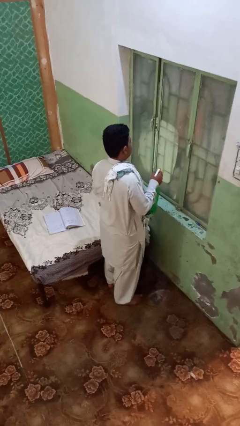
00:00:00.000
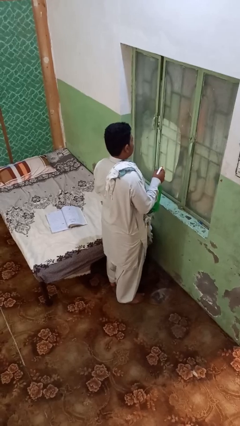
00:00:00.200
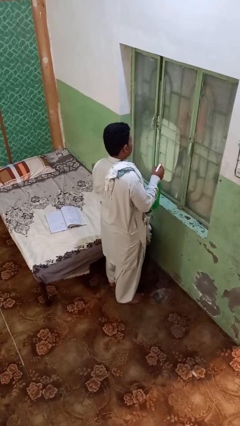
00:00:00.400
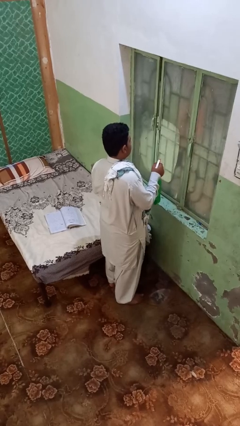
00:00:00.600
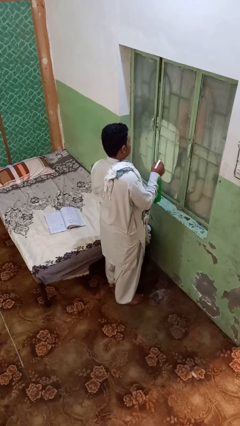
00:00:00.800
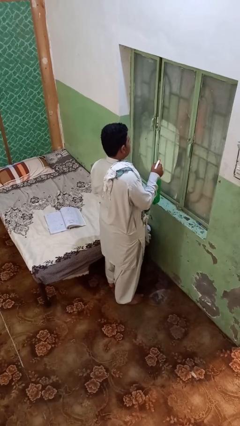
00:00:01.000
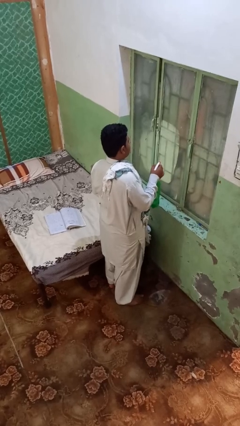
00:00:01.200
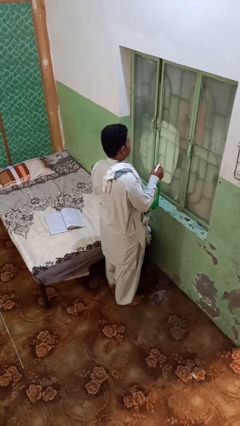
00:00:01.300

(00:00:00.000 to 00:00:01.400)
person sprays from bottle

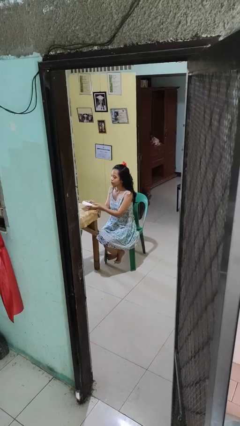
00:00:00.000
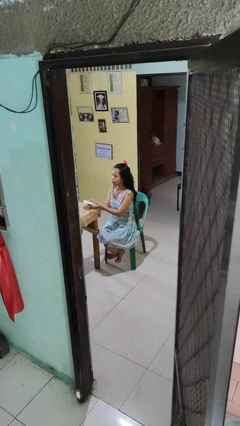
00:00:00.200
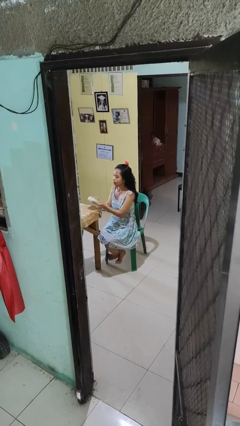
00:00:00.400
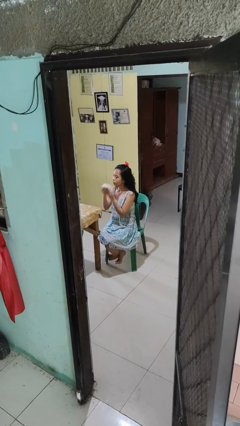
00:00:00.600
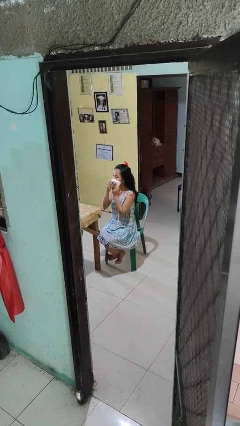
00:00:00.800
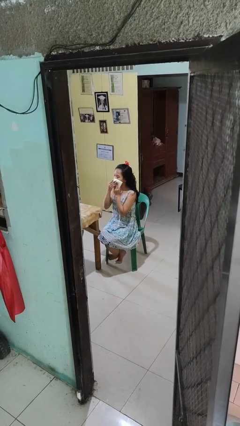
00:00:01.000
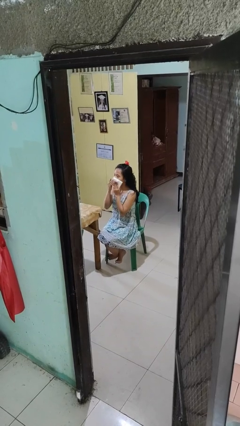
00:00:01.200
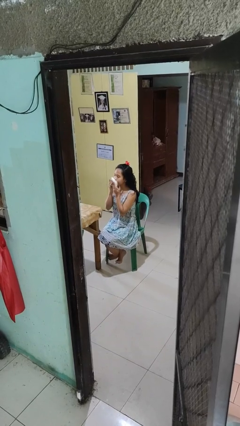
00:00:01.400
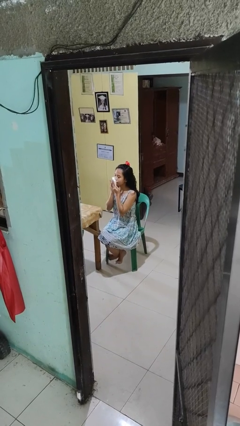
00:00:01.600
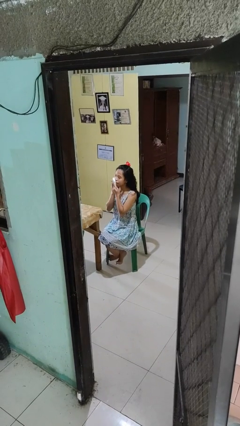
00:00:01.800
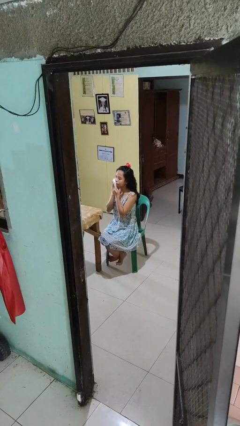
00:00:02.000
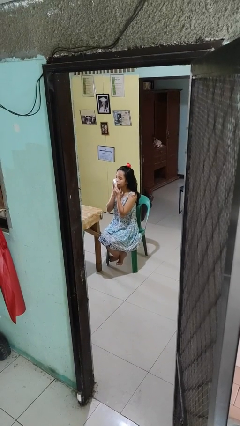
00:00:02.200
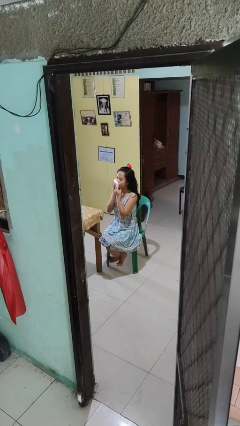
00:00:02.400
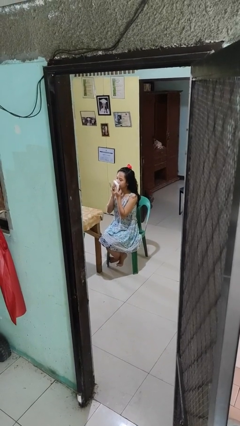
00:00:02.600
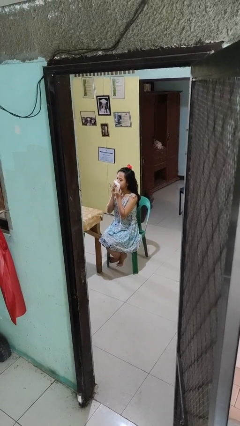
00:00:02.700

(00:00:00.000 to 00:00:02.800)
person wipes mouth with napkin

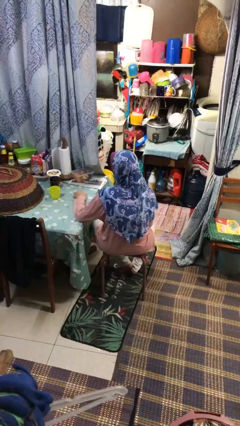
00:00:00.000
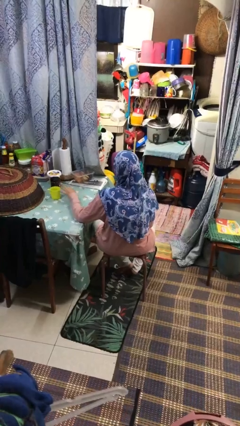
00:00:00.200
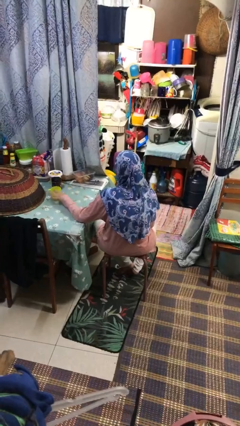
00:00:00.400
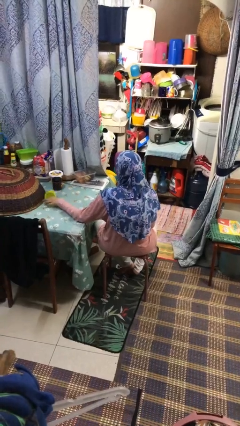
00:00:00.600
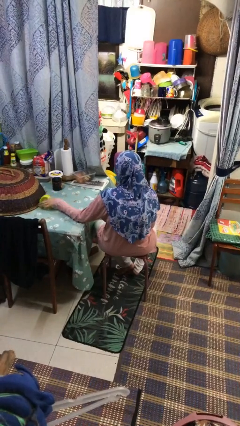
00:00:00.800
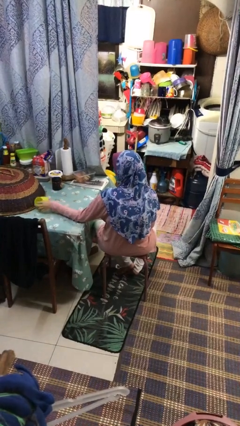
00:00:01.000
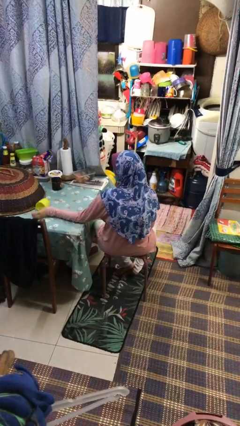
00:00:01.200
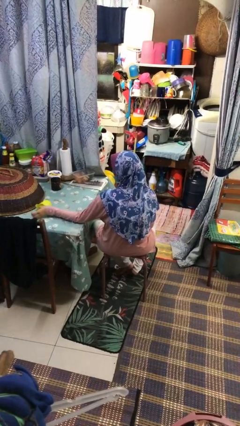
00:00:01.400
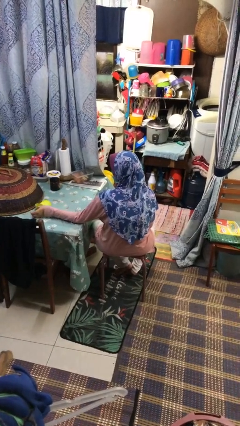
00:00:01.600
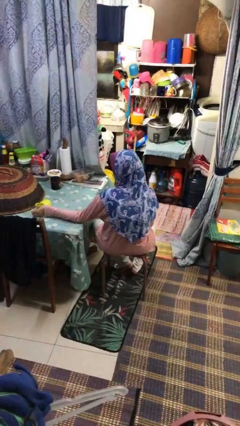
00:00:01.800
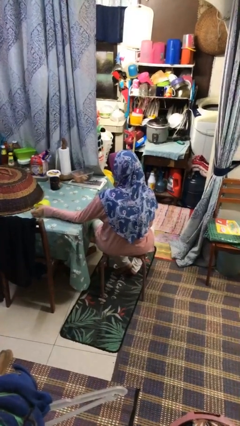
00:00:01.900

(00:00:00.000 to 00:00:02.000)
person knocks over glass

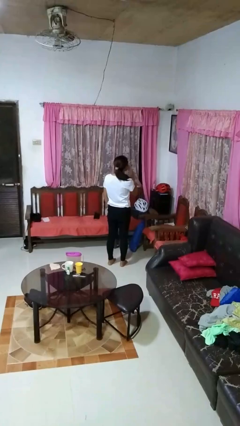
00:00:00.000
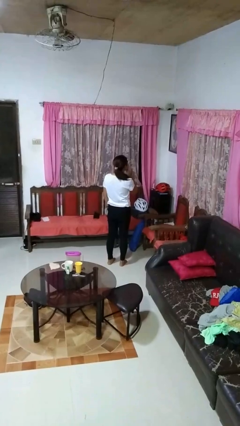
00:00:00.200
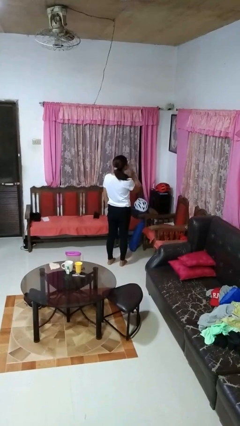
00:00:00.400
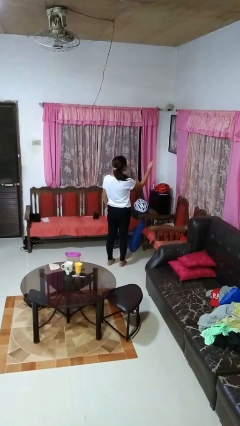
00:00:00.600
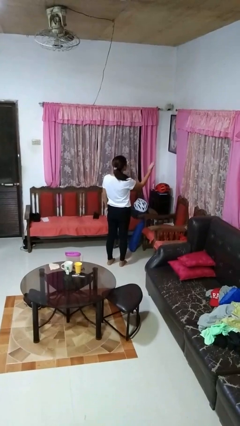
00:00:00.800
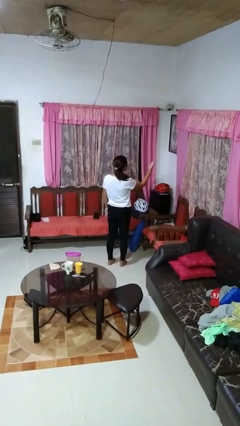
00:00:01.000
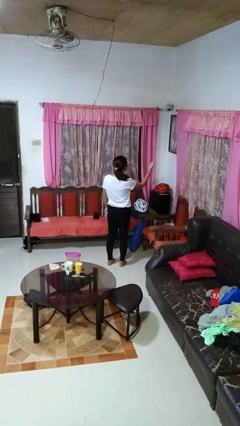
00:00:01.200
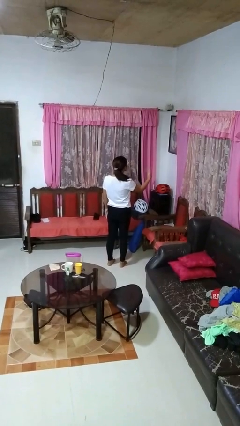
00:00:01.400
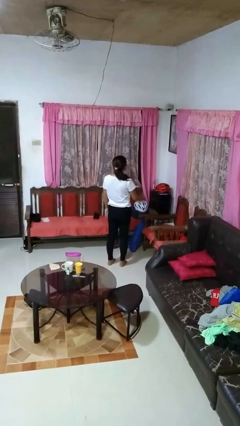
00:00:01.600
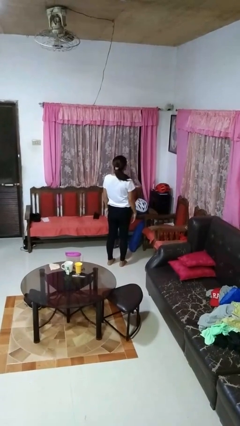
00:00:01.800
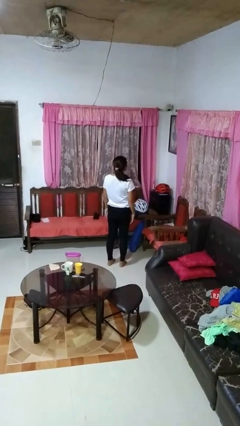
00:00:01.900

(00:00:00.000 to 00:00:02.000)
person gestures blow kiss

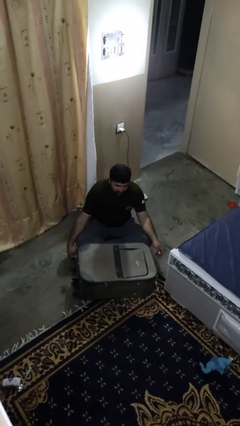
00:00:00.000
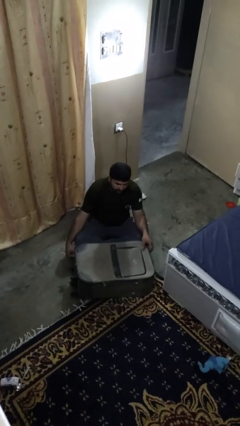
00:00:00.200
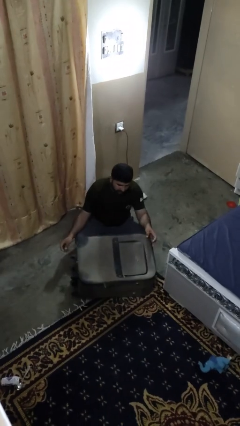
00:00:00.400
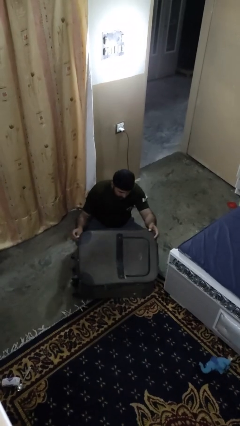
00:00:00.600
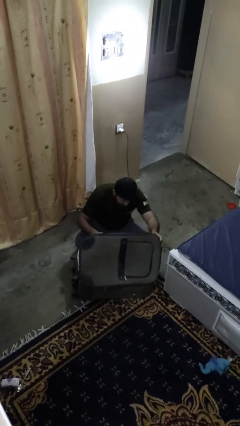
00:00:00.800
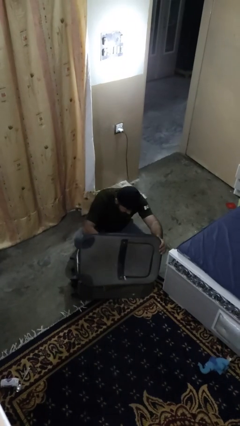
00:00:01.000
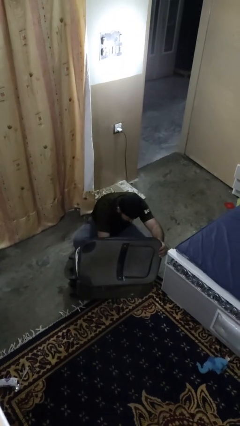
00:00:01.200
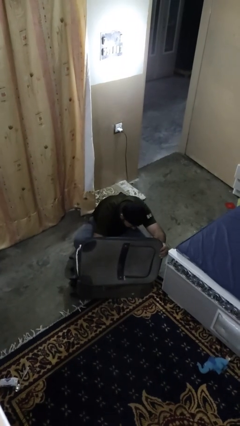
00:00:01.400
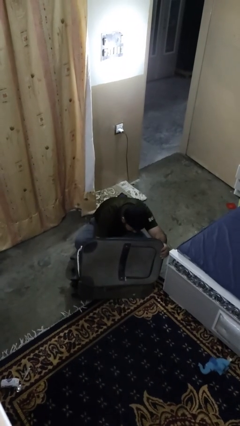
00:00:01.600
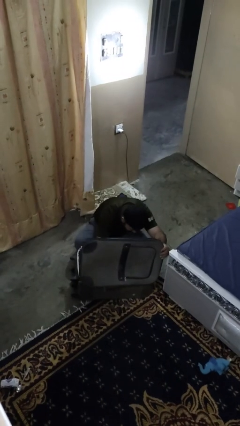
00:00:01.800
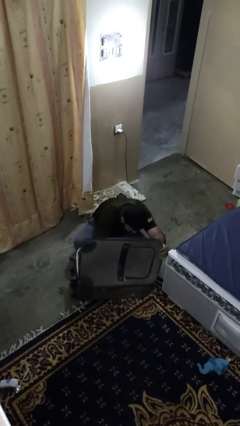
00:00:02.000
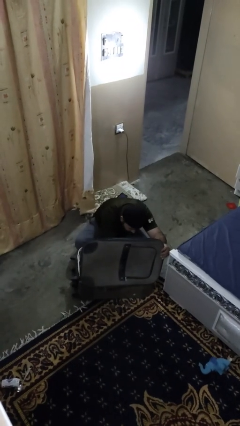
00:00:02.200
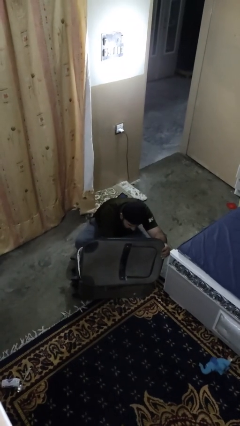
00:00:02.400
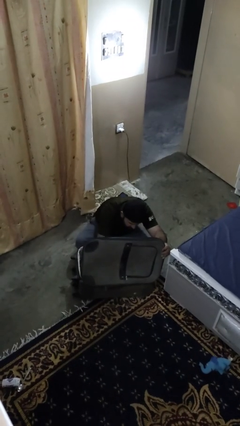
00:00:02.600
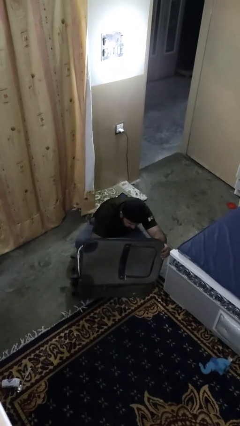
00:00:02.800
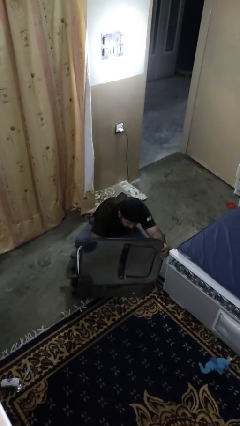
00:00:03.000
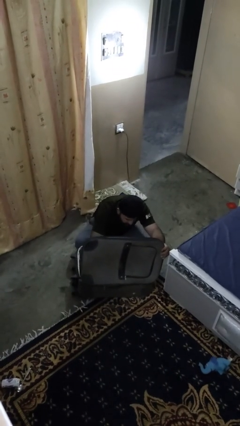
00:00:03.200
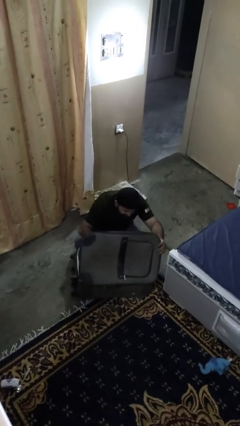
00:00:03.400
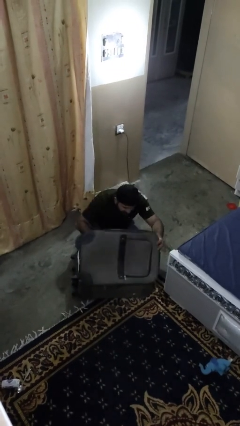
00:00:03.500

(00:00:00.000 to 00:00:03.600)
person searches in bag

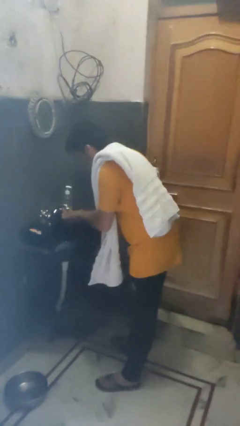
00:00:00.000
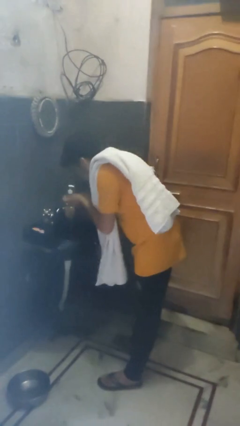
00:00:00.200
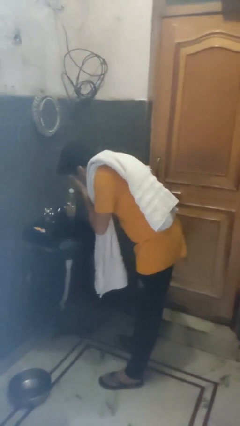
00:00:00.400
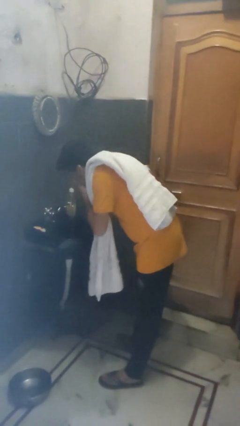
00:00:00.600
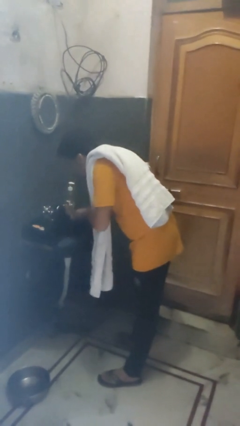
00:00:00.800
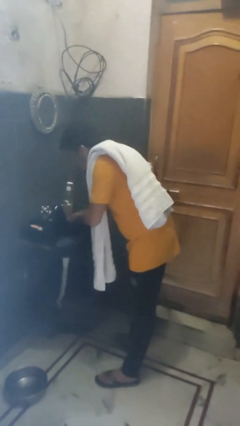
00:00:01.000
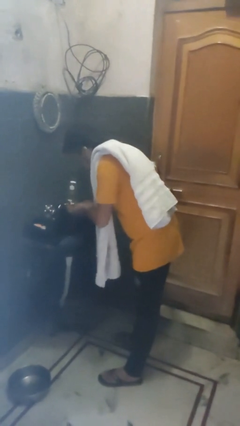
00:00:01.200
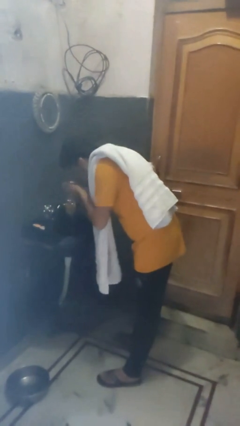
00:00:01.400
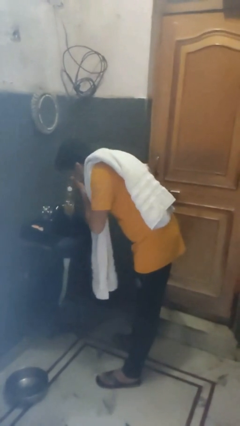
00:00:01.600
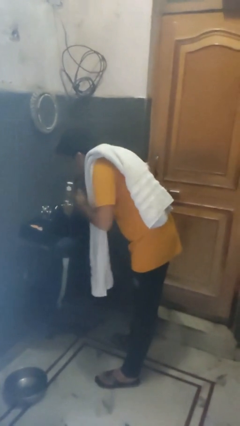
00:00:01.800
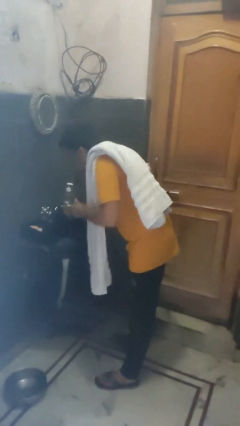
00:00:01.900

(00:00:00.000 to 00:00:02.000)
person washes face

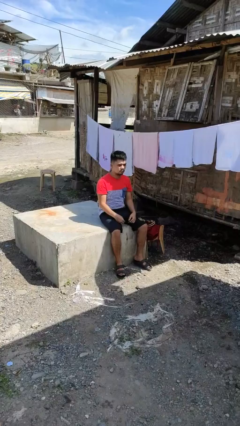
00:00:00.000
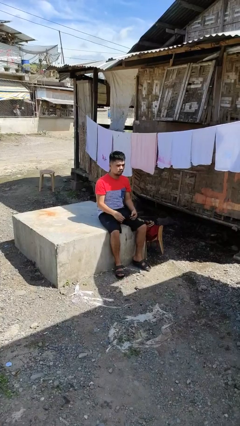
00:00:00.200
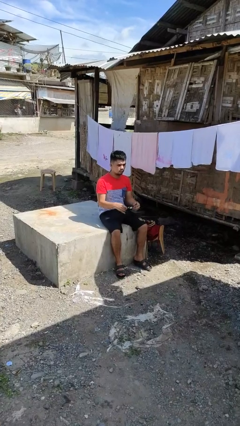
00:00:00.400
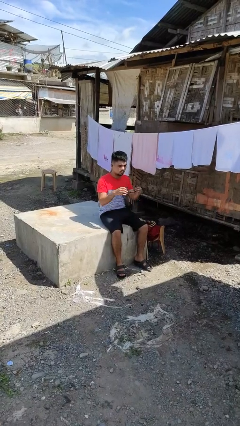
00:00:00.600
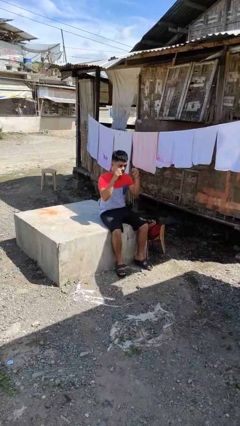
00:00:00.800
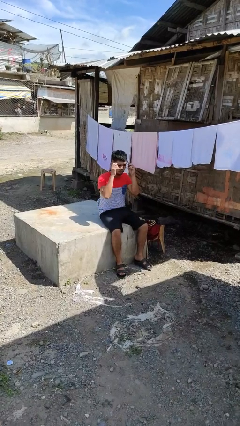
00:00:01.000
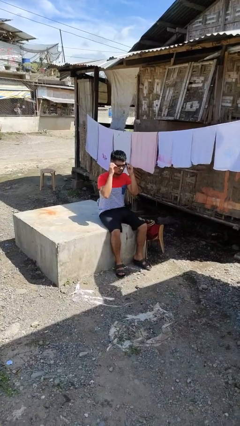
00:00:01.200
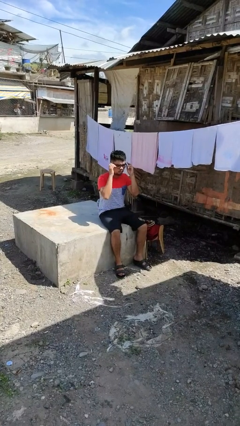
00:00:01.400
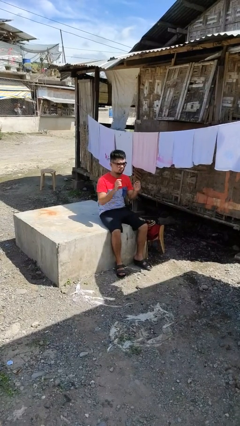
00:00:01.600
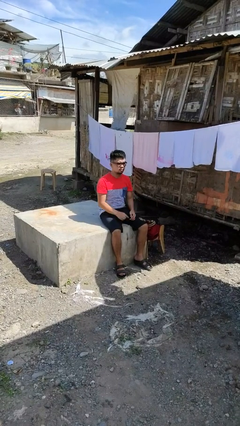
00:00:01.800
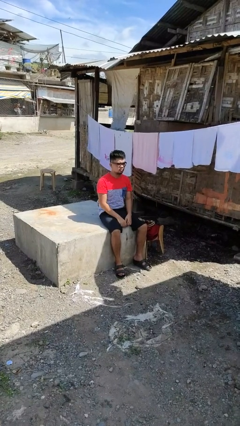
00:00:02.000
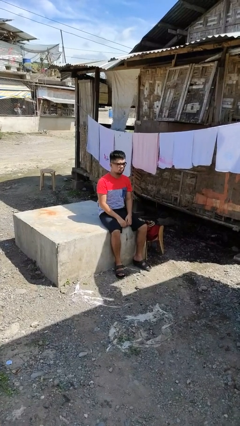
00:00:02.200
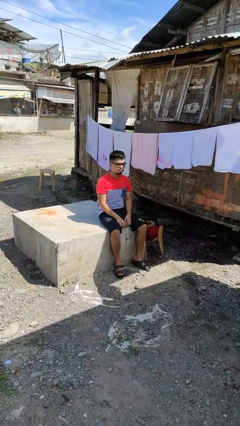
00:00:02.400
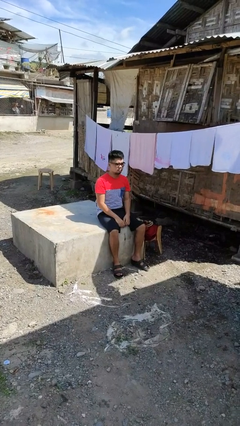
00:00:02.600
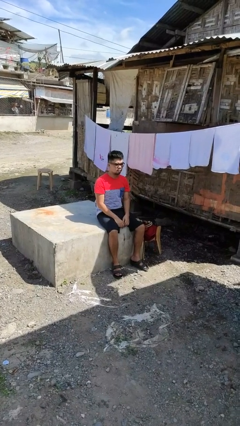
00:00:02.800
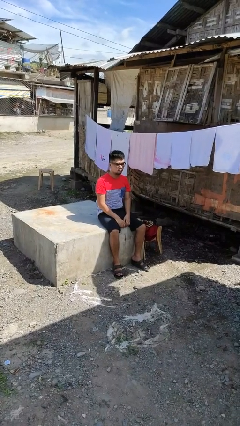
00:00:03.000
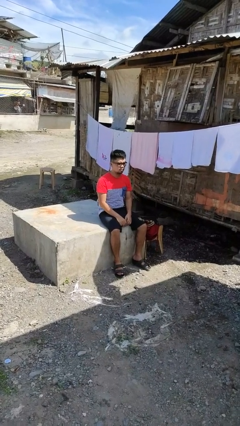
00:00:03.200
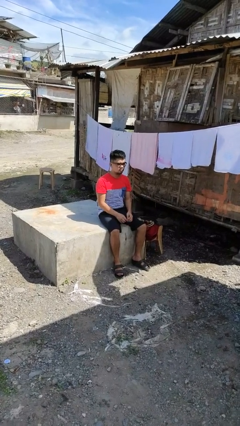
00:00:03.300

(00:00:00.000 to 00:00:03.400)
person puts on glasses
